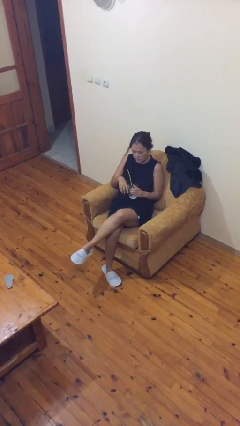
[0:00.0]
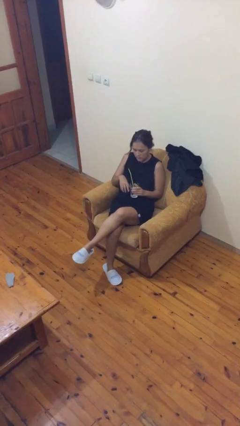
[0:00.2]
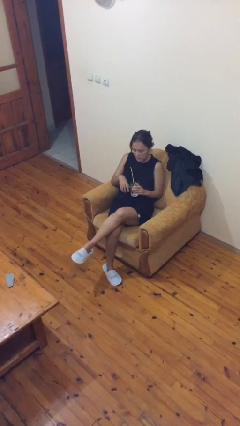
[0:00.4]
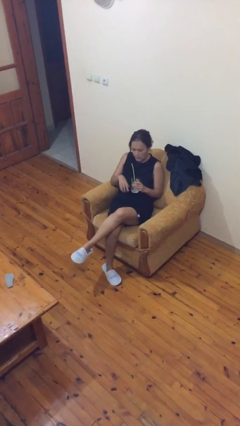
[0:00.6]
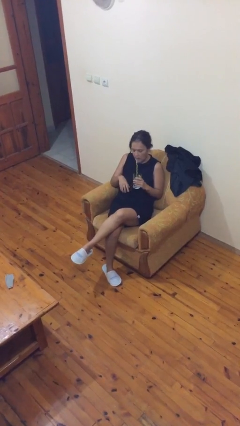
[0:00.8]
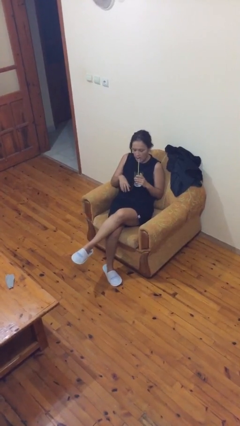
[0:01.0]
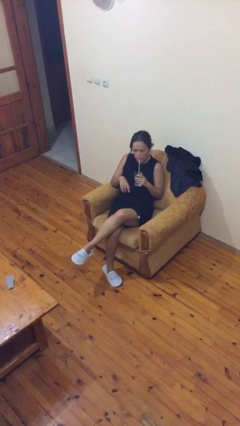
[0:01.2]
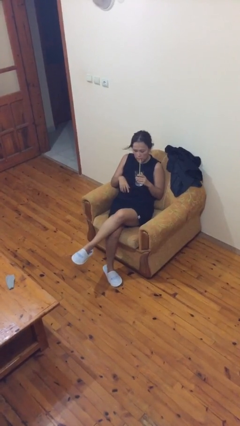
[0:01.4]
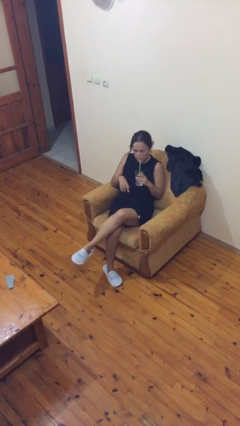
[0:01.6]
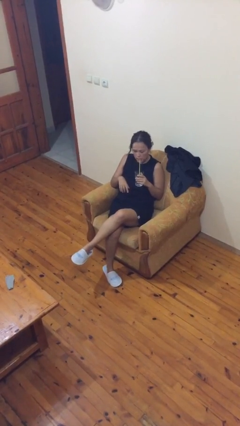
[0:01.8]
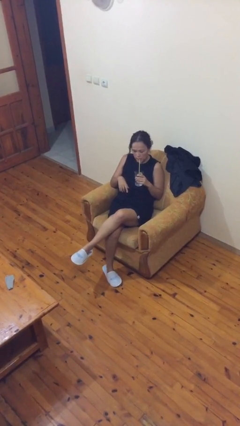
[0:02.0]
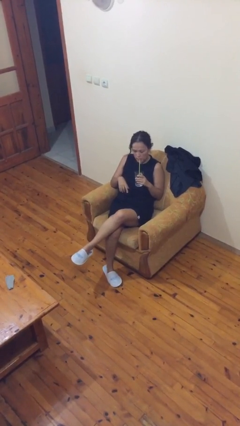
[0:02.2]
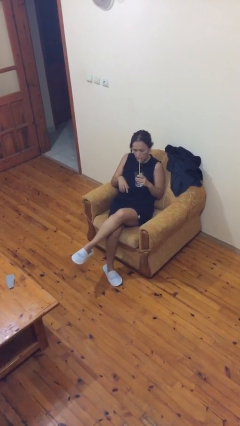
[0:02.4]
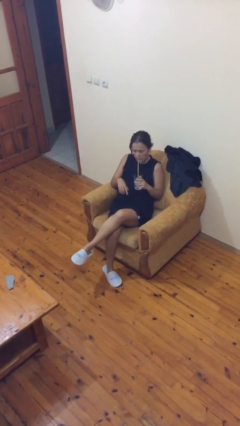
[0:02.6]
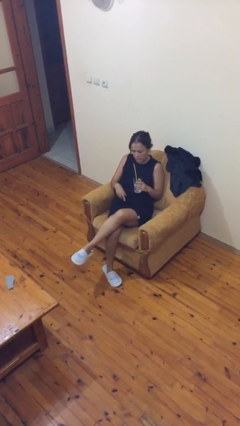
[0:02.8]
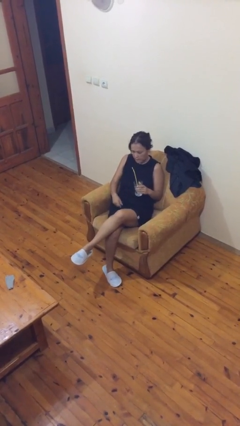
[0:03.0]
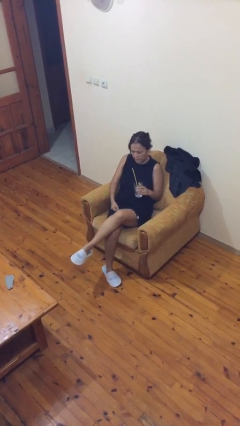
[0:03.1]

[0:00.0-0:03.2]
person drinks from straw

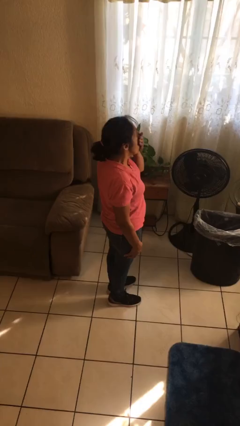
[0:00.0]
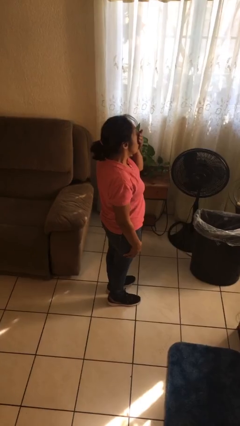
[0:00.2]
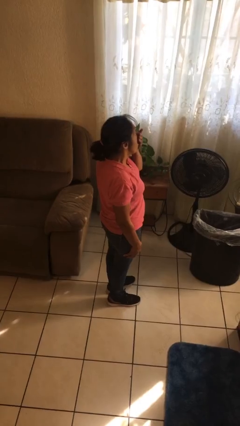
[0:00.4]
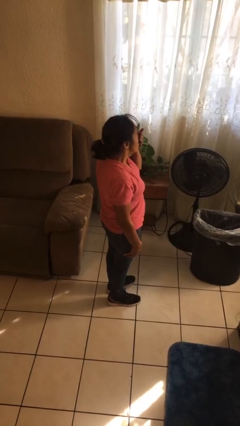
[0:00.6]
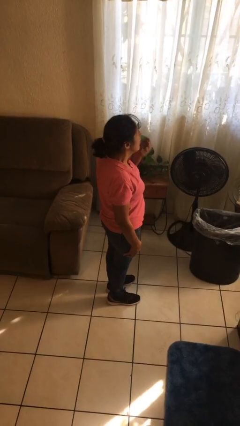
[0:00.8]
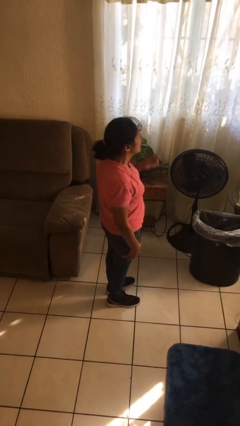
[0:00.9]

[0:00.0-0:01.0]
person yawns

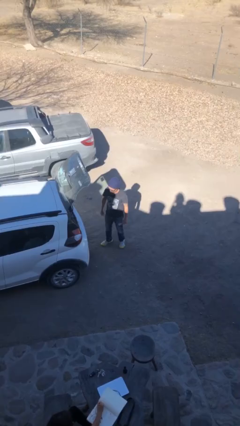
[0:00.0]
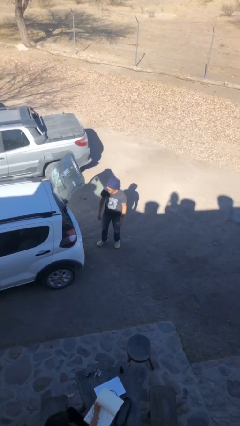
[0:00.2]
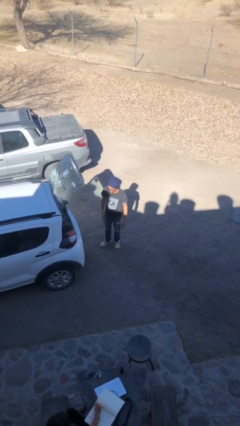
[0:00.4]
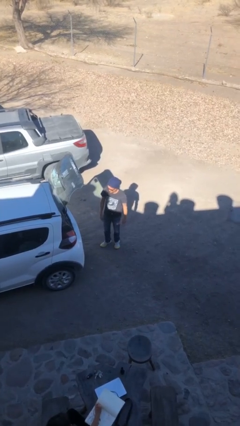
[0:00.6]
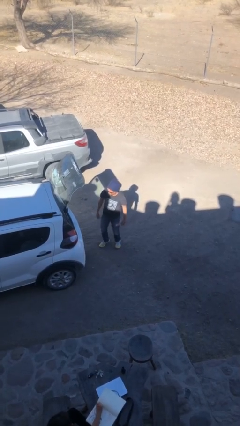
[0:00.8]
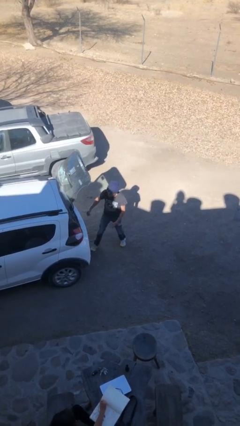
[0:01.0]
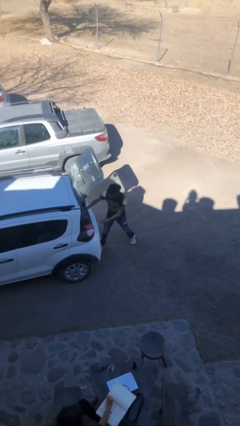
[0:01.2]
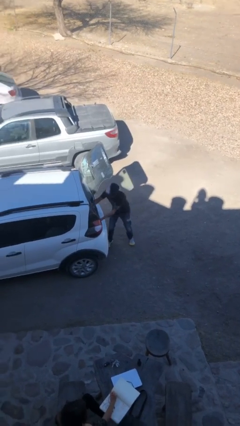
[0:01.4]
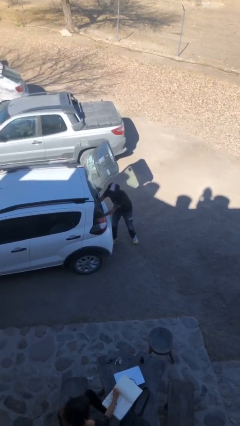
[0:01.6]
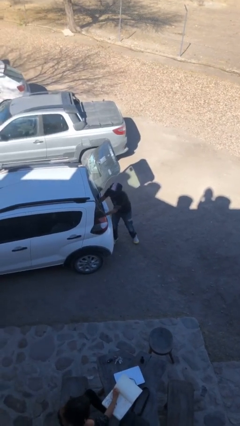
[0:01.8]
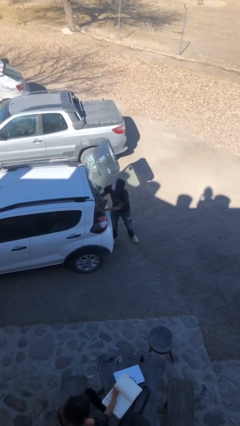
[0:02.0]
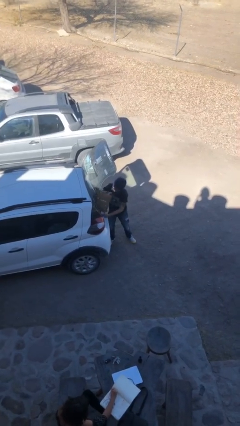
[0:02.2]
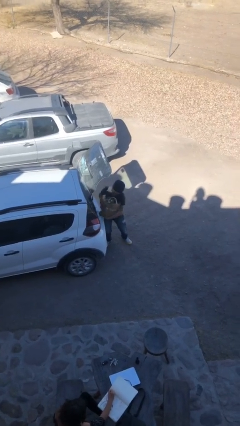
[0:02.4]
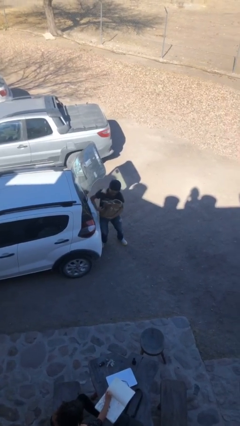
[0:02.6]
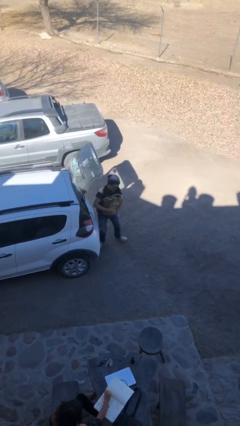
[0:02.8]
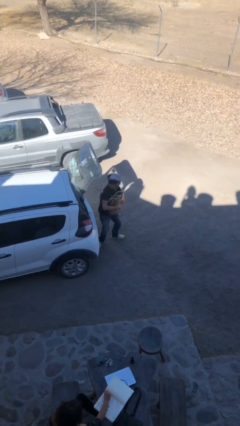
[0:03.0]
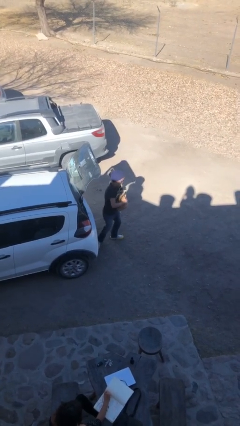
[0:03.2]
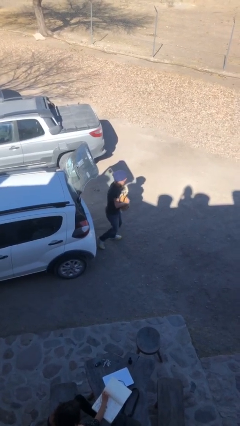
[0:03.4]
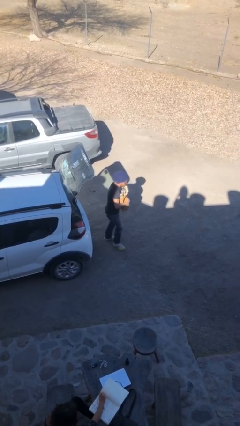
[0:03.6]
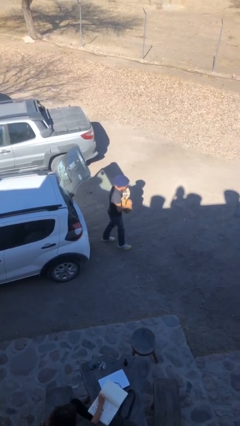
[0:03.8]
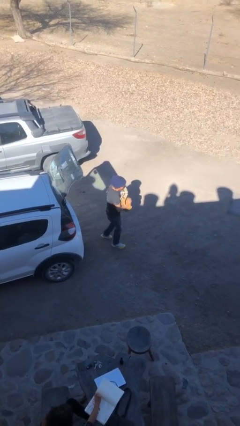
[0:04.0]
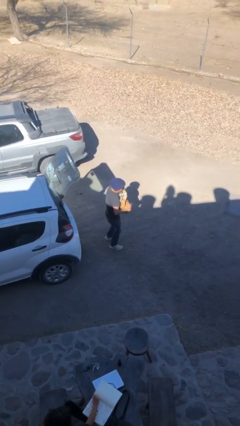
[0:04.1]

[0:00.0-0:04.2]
person unloads car

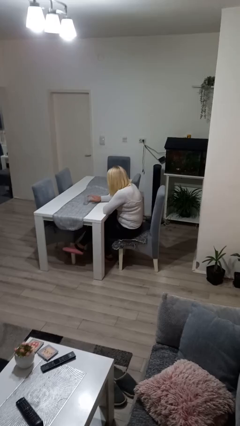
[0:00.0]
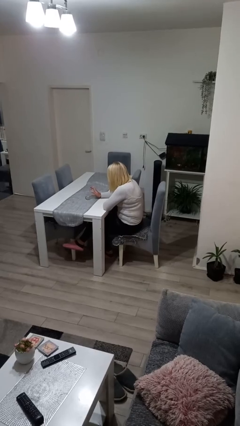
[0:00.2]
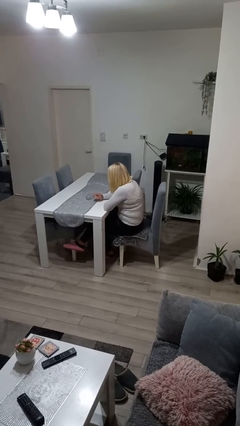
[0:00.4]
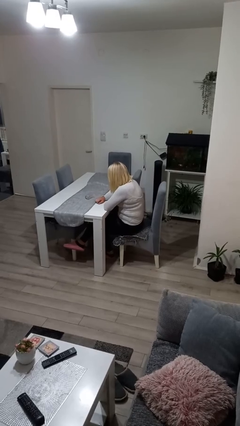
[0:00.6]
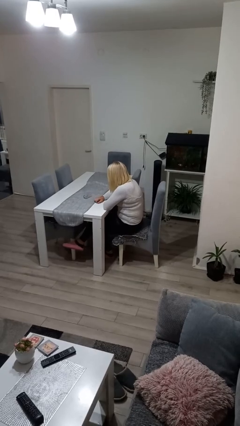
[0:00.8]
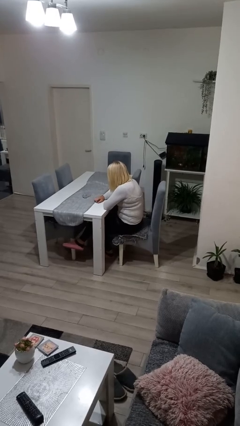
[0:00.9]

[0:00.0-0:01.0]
person knocks over glass

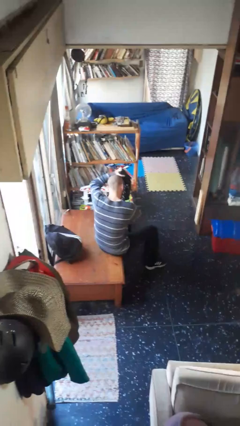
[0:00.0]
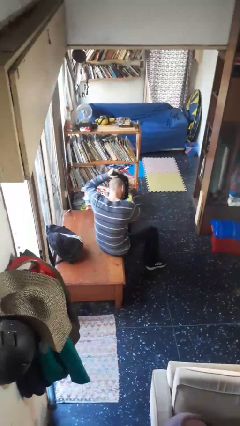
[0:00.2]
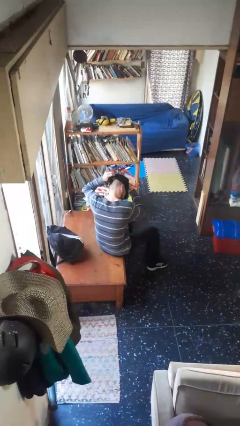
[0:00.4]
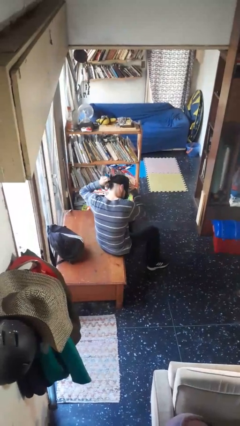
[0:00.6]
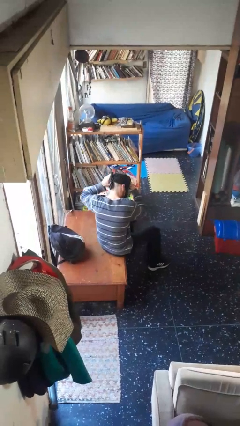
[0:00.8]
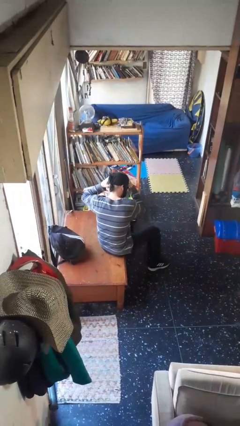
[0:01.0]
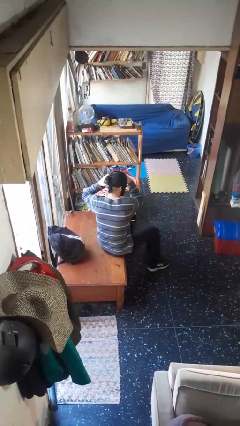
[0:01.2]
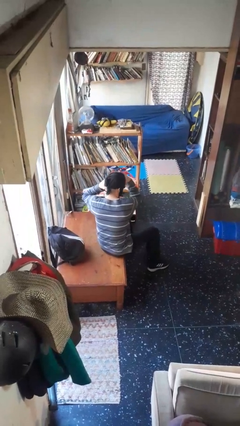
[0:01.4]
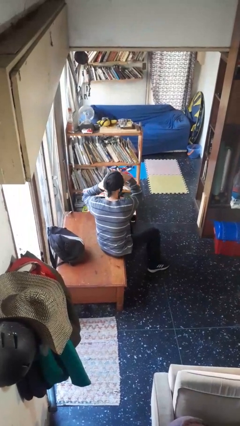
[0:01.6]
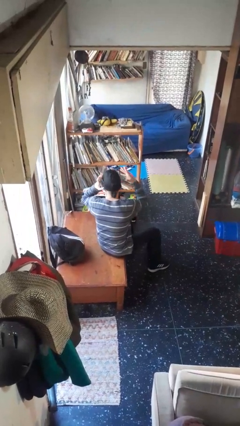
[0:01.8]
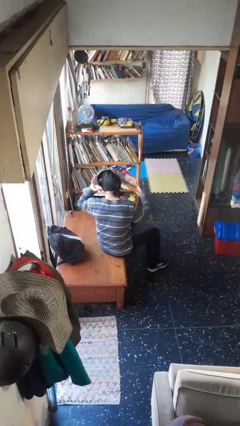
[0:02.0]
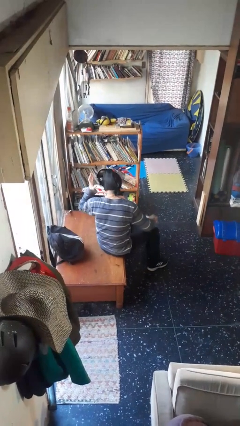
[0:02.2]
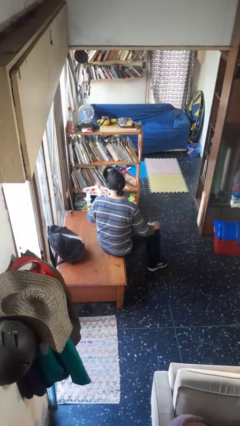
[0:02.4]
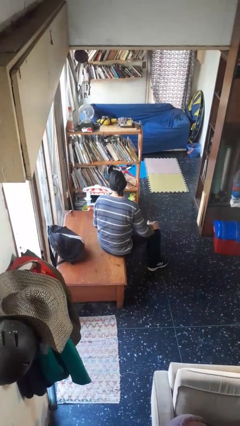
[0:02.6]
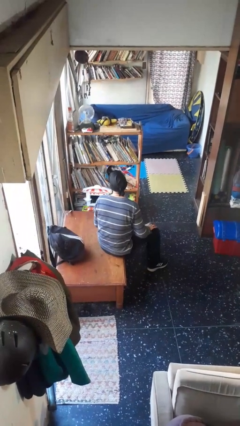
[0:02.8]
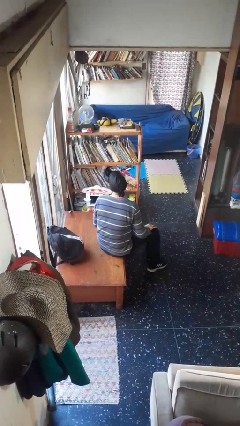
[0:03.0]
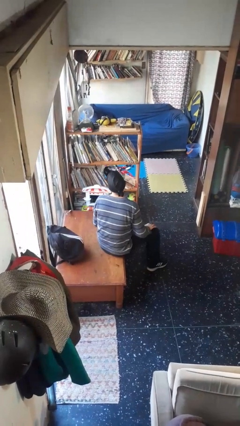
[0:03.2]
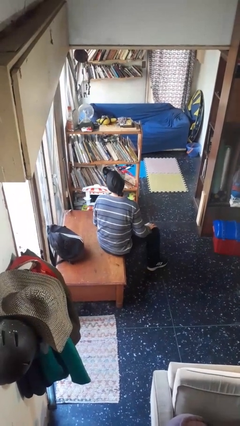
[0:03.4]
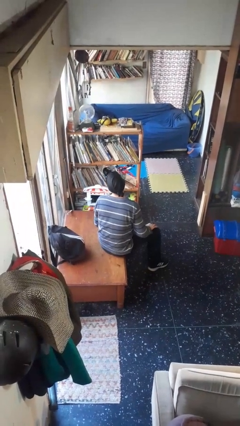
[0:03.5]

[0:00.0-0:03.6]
person puts on facemask

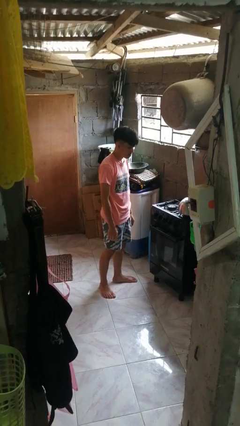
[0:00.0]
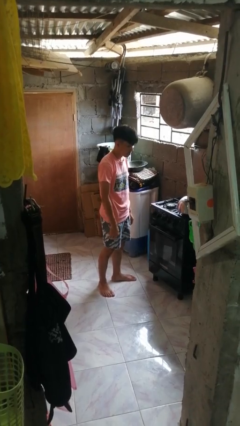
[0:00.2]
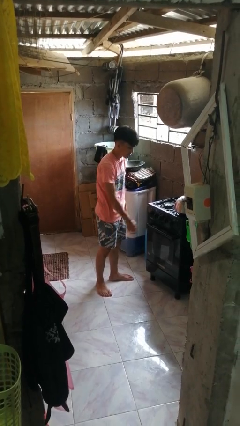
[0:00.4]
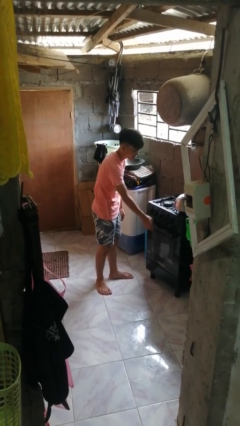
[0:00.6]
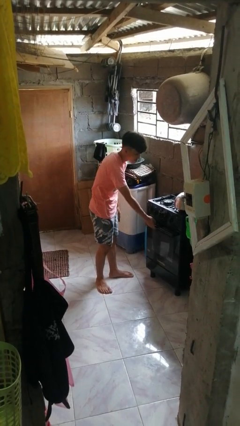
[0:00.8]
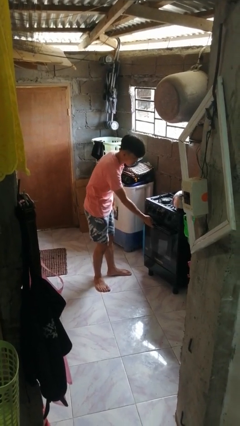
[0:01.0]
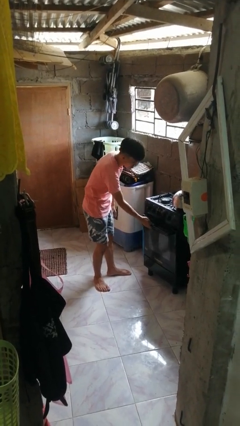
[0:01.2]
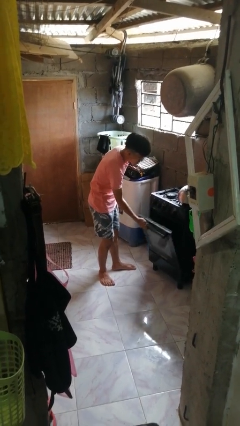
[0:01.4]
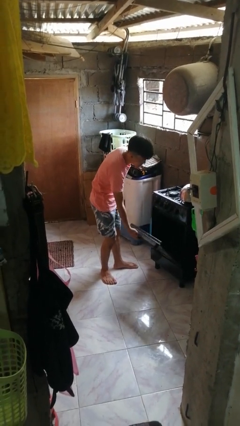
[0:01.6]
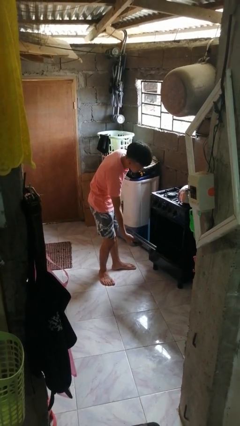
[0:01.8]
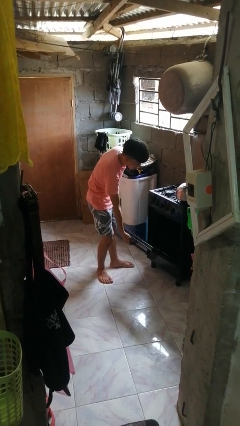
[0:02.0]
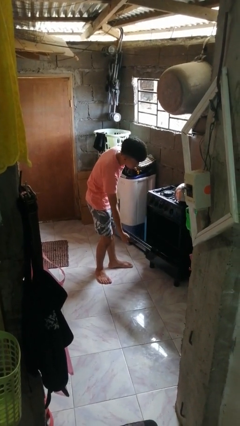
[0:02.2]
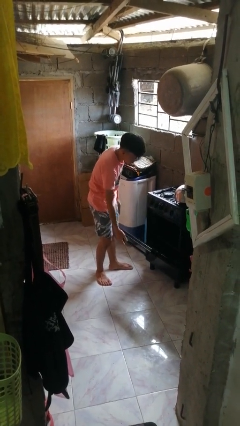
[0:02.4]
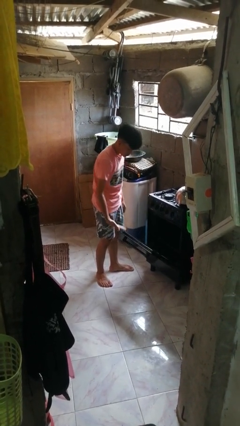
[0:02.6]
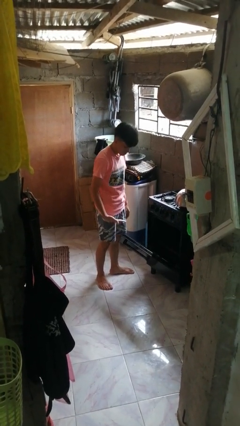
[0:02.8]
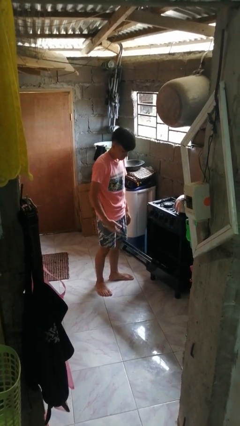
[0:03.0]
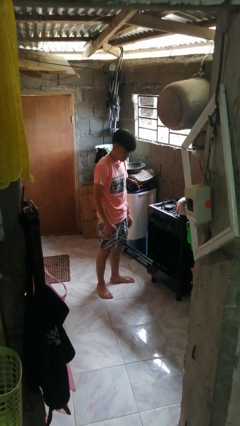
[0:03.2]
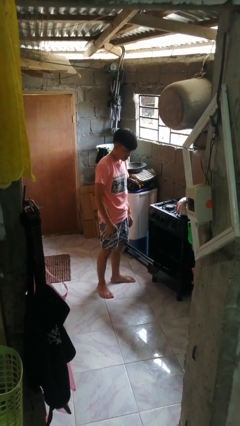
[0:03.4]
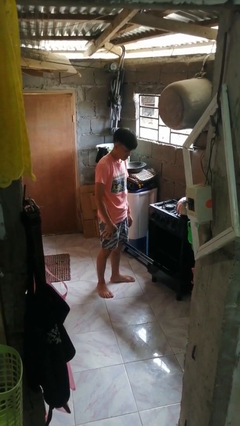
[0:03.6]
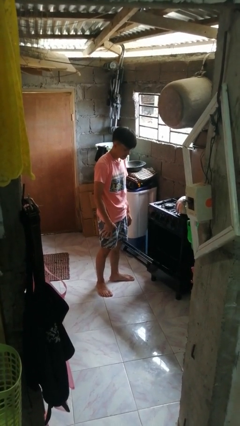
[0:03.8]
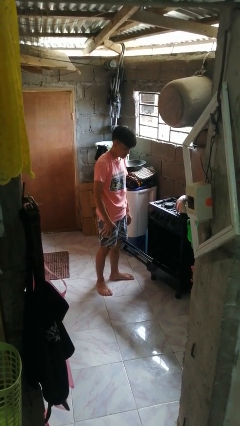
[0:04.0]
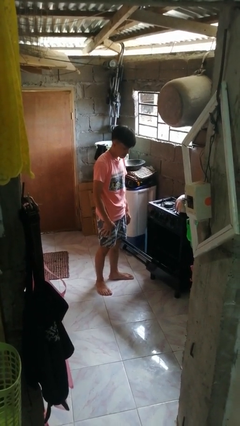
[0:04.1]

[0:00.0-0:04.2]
person opens oven door
